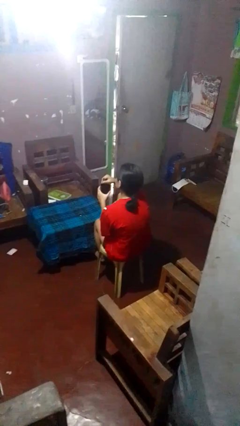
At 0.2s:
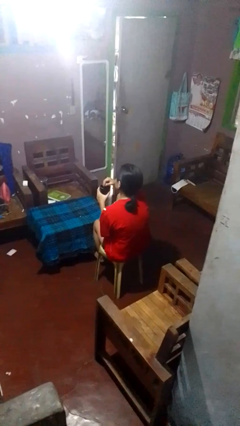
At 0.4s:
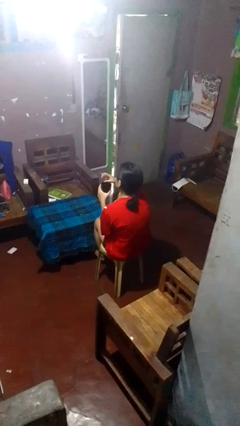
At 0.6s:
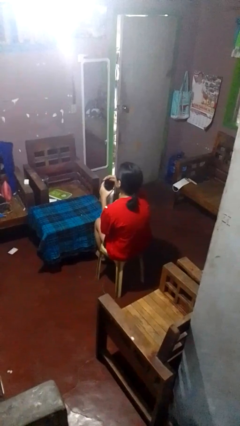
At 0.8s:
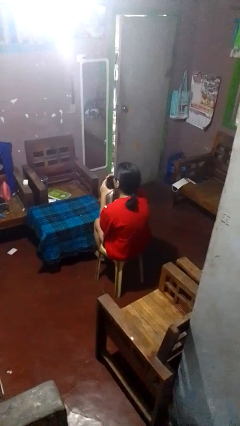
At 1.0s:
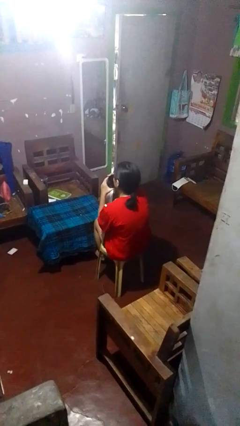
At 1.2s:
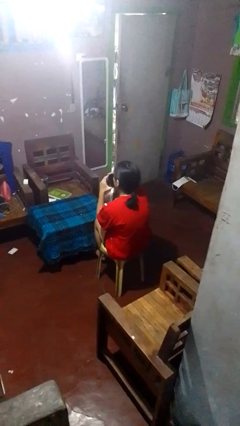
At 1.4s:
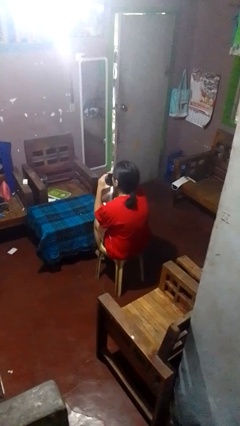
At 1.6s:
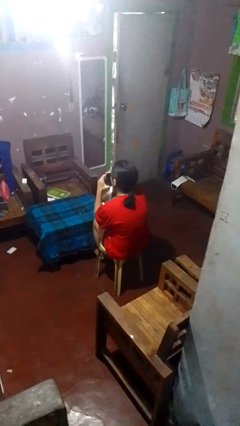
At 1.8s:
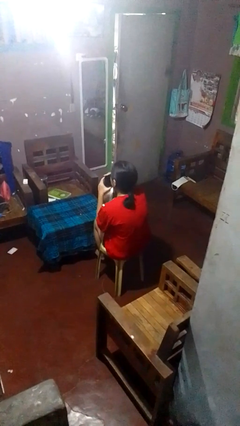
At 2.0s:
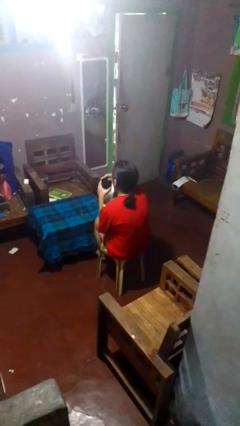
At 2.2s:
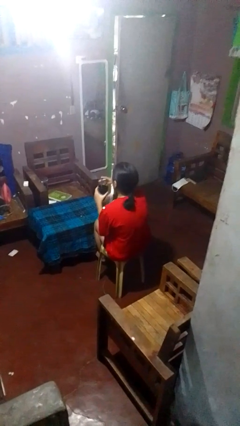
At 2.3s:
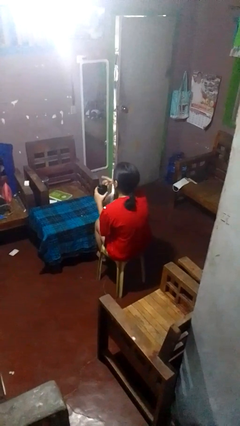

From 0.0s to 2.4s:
person drinks from mug

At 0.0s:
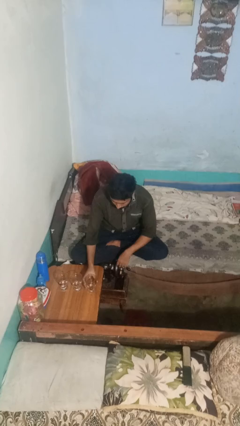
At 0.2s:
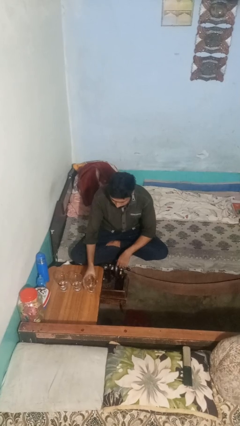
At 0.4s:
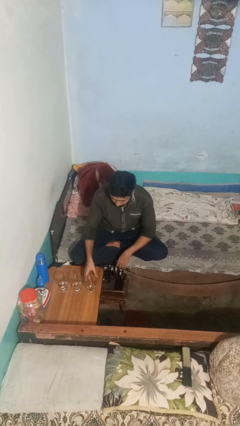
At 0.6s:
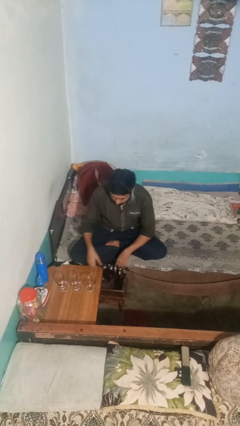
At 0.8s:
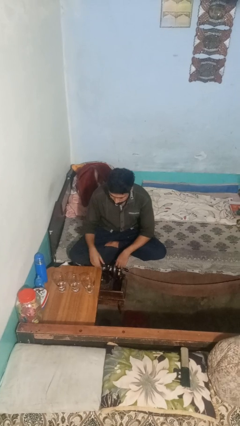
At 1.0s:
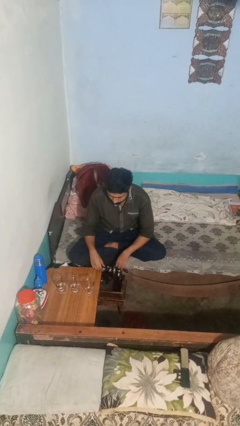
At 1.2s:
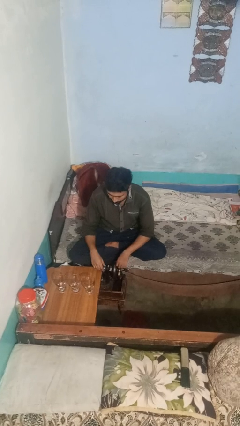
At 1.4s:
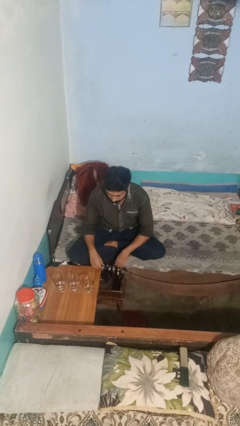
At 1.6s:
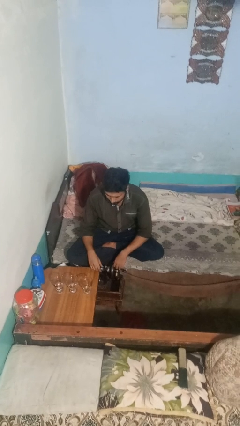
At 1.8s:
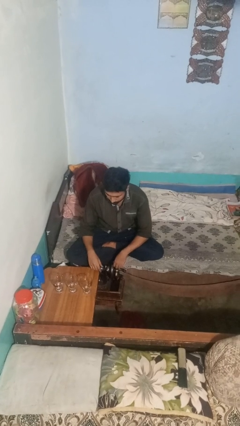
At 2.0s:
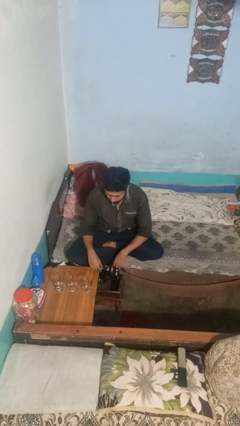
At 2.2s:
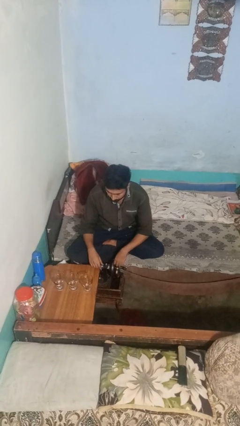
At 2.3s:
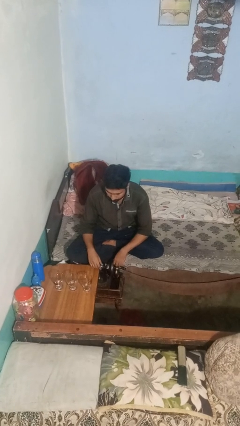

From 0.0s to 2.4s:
person puts down object on table

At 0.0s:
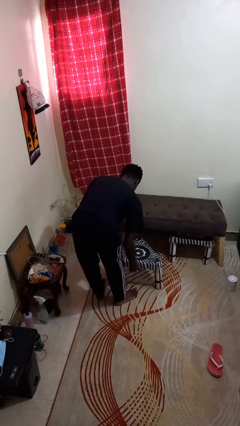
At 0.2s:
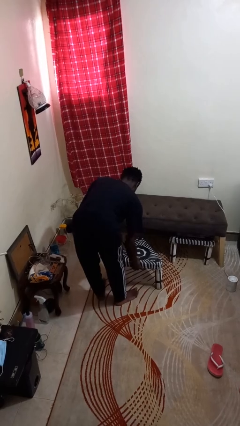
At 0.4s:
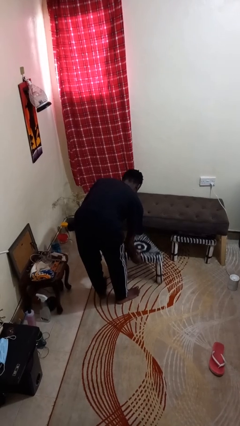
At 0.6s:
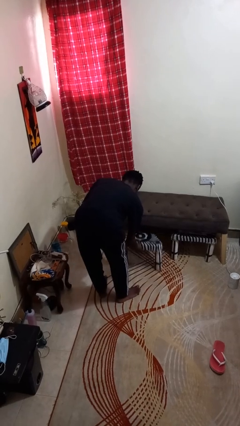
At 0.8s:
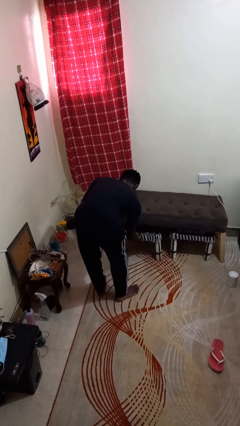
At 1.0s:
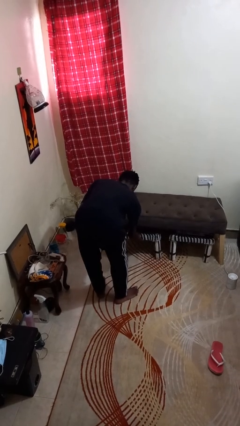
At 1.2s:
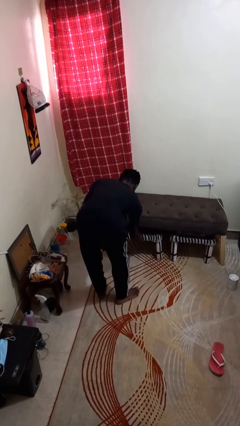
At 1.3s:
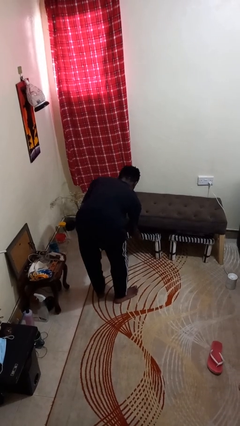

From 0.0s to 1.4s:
person pushes in chair

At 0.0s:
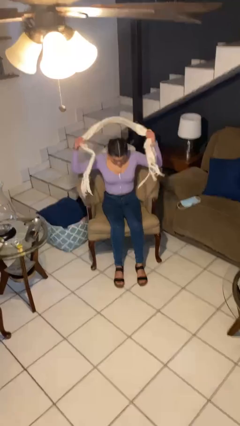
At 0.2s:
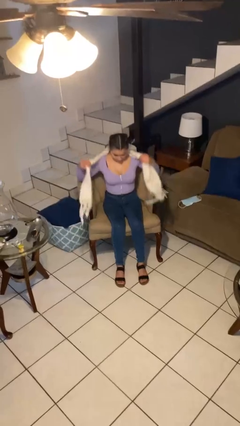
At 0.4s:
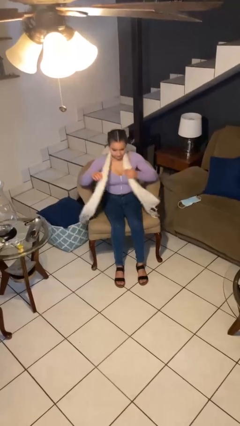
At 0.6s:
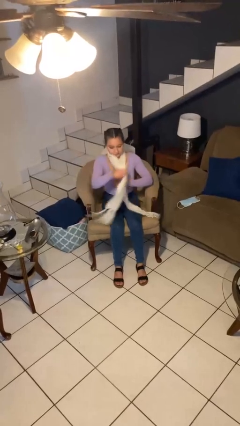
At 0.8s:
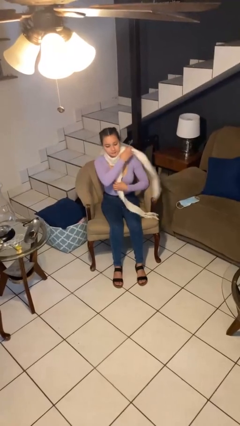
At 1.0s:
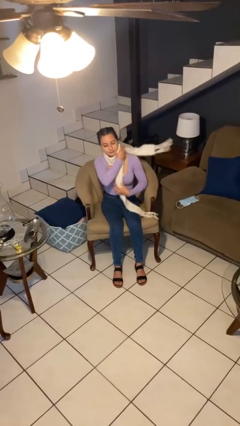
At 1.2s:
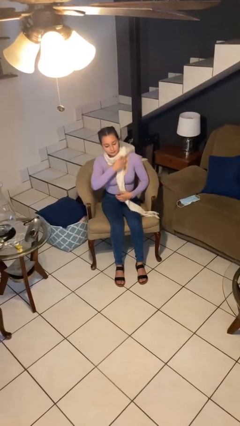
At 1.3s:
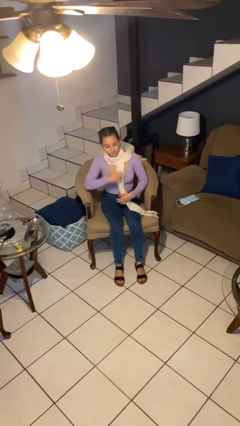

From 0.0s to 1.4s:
person puts on scarf

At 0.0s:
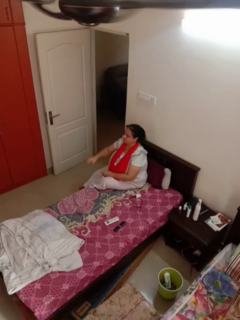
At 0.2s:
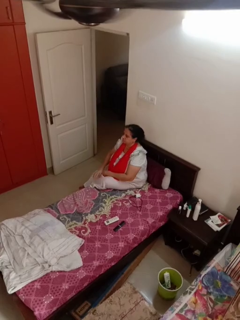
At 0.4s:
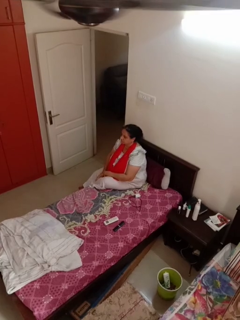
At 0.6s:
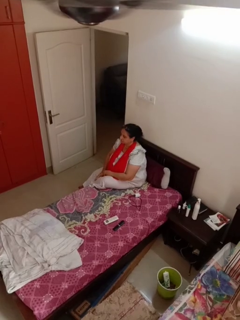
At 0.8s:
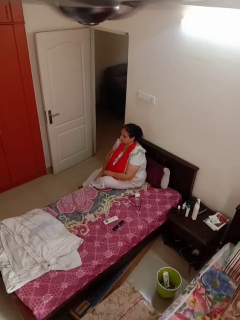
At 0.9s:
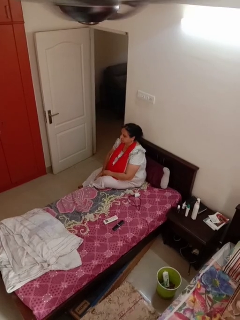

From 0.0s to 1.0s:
person gestures lower hand

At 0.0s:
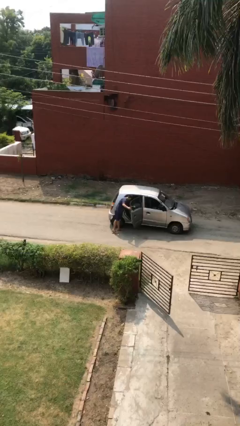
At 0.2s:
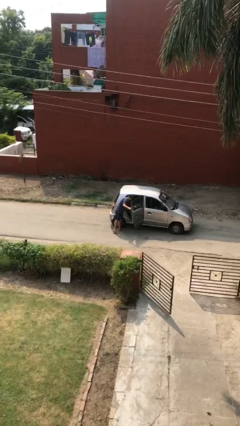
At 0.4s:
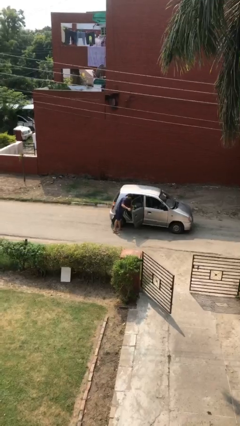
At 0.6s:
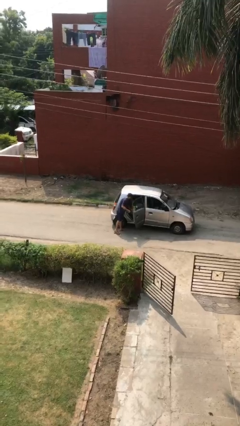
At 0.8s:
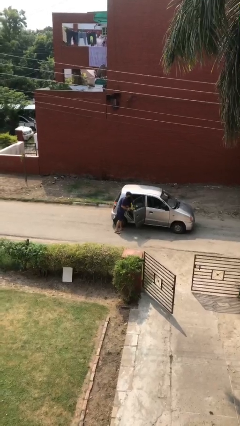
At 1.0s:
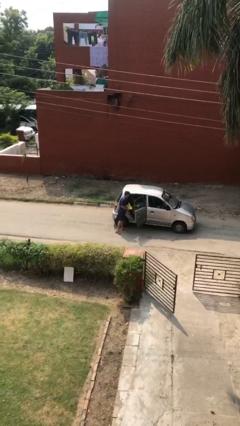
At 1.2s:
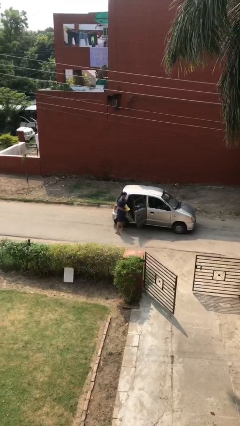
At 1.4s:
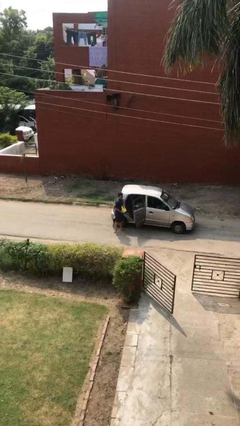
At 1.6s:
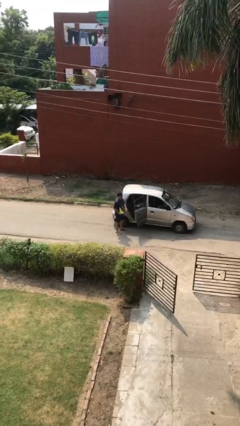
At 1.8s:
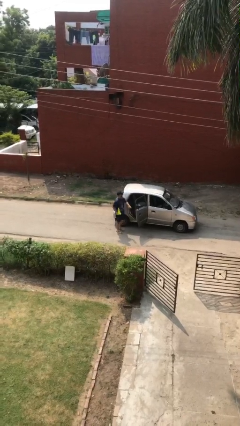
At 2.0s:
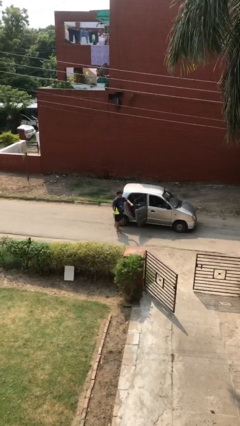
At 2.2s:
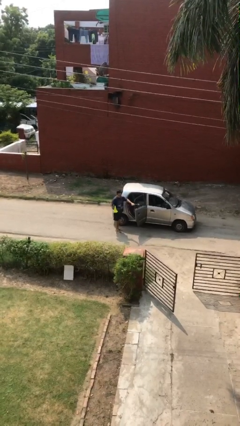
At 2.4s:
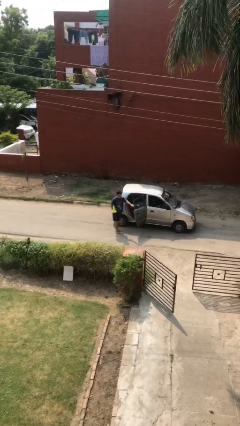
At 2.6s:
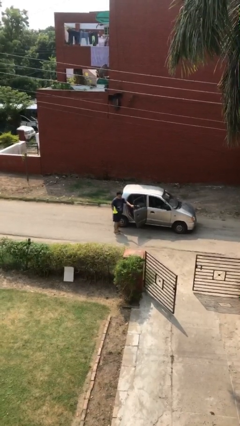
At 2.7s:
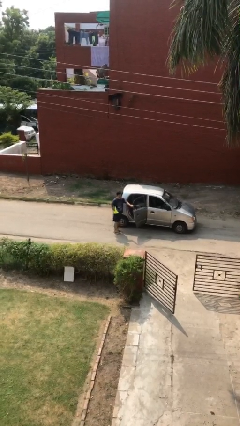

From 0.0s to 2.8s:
person unloads car

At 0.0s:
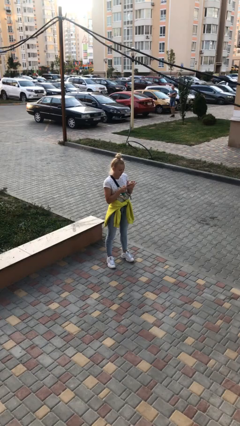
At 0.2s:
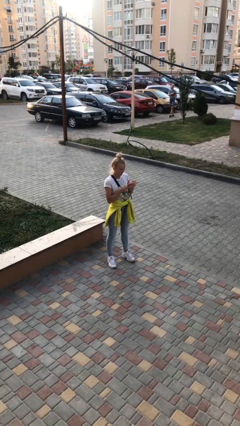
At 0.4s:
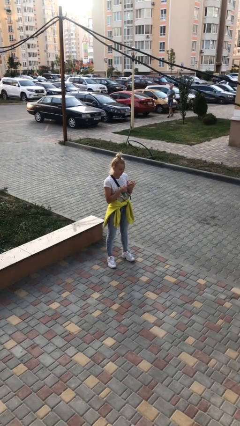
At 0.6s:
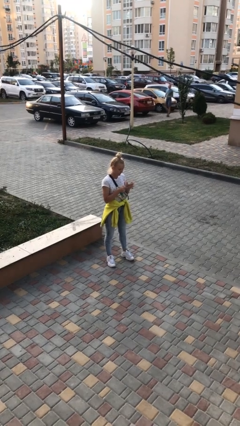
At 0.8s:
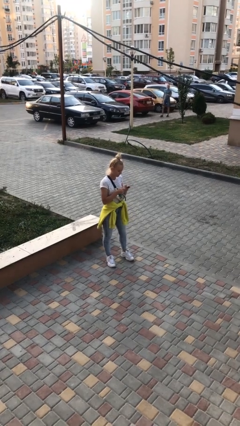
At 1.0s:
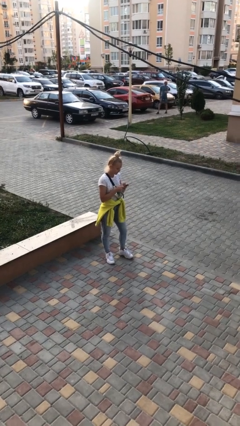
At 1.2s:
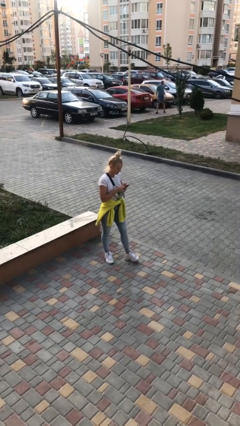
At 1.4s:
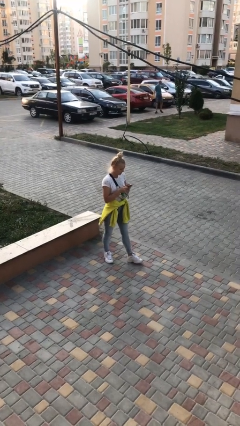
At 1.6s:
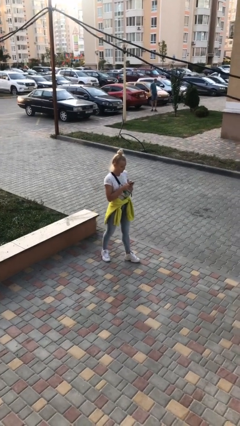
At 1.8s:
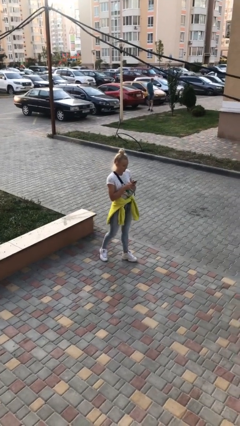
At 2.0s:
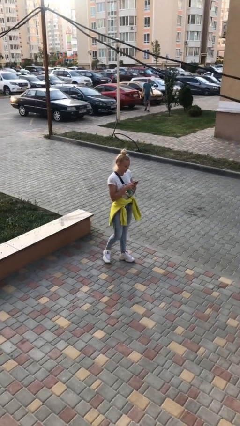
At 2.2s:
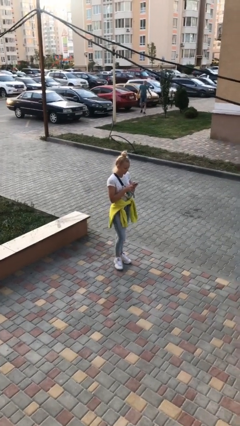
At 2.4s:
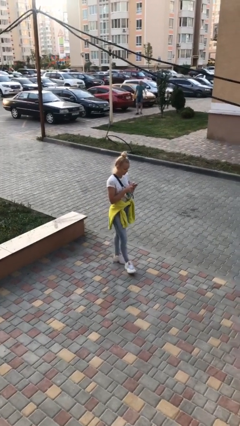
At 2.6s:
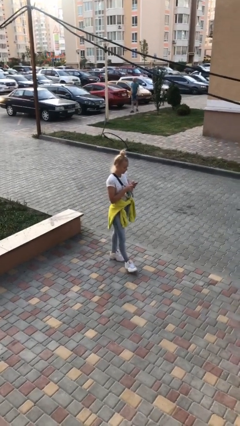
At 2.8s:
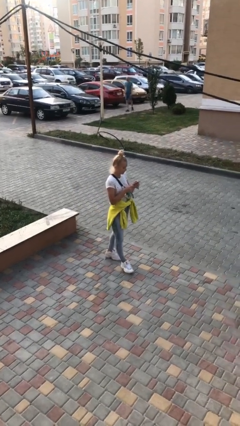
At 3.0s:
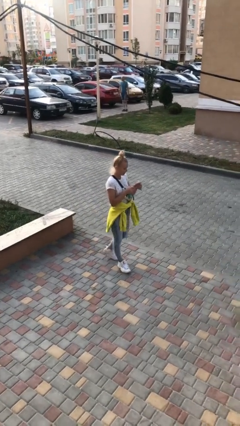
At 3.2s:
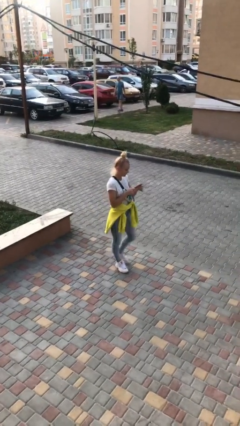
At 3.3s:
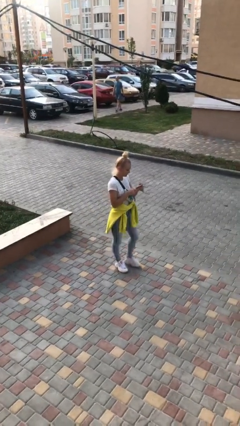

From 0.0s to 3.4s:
person texts on phone

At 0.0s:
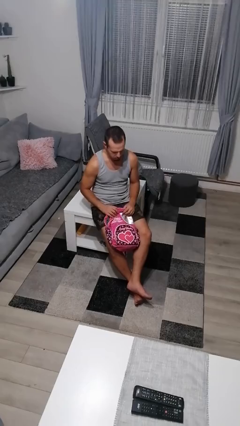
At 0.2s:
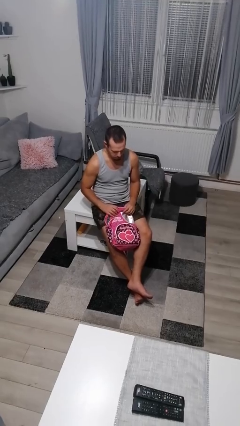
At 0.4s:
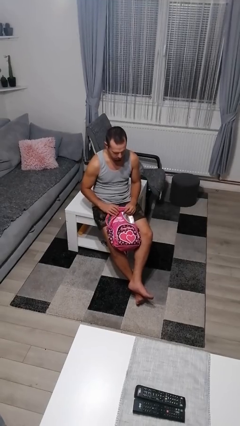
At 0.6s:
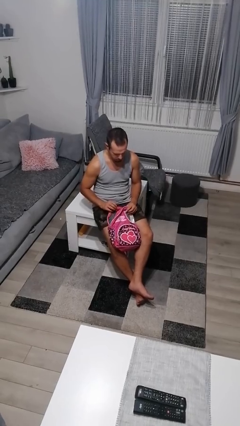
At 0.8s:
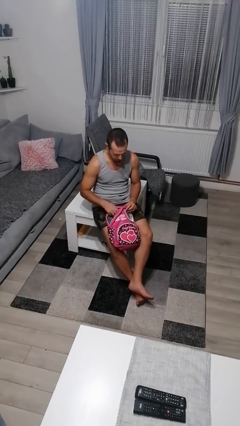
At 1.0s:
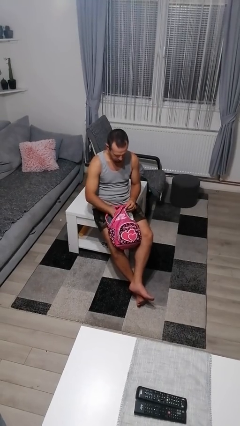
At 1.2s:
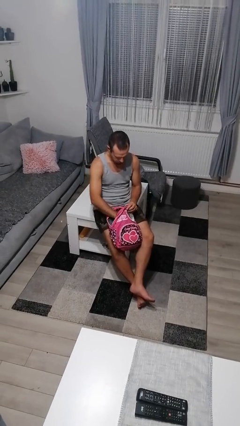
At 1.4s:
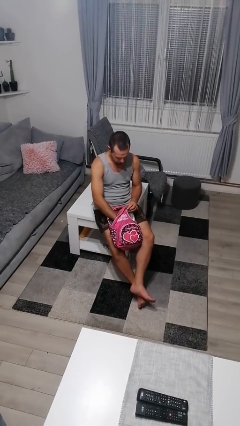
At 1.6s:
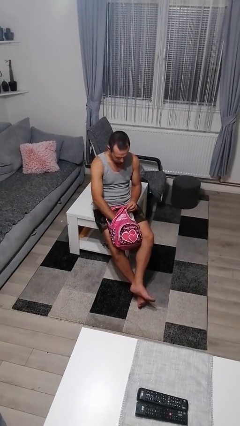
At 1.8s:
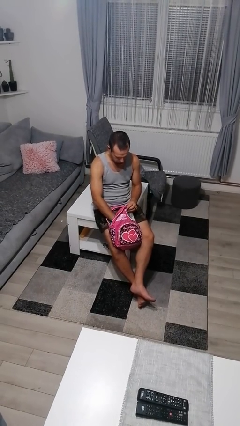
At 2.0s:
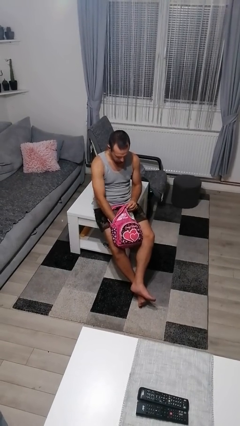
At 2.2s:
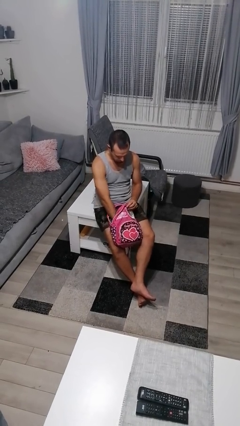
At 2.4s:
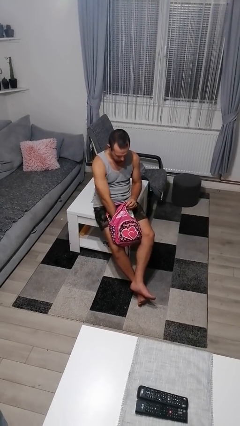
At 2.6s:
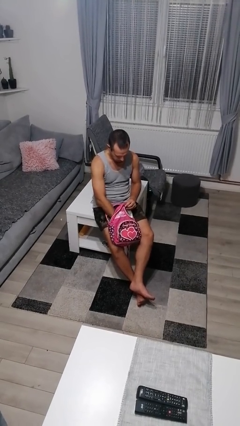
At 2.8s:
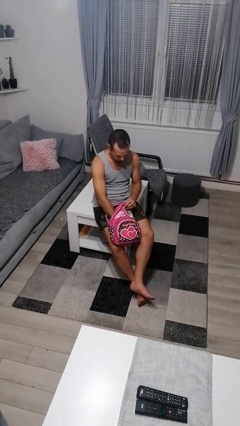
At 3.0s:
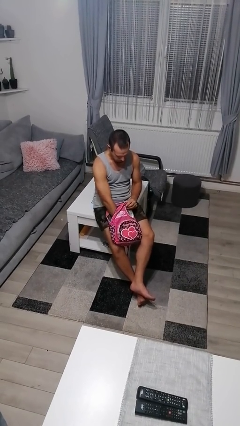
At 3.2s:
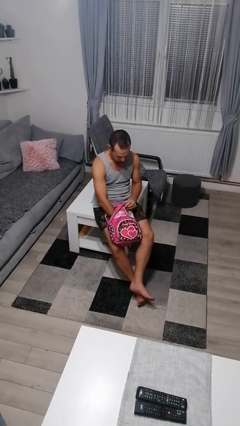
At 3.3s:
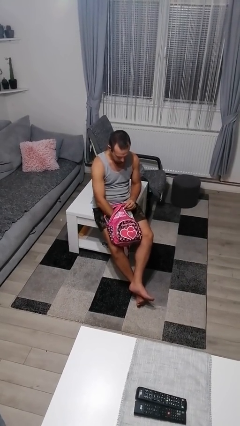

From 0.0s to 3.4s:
person searches in backpack
